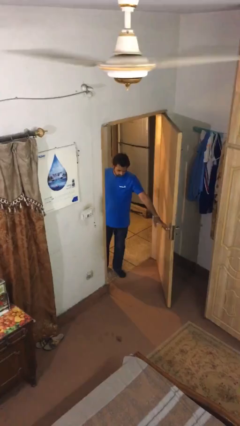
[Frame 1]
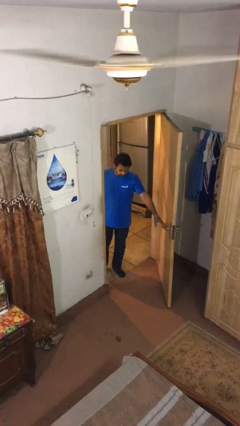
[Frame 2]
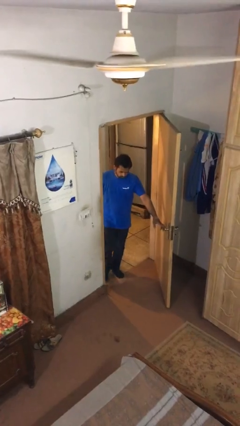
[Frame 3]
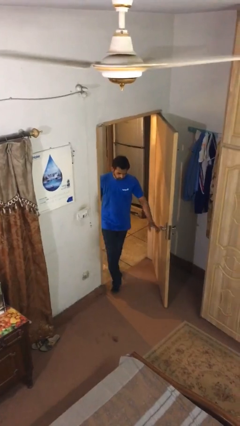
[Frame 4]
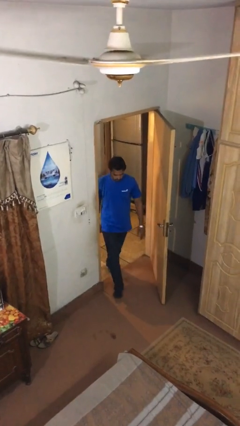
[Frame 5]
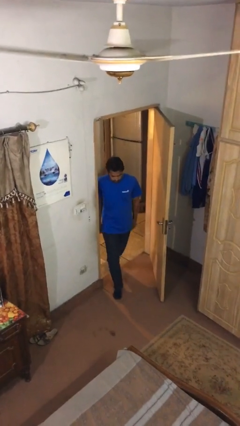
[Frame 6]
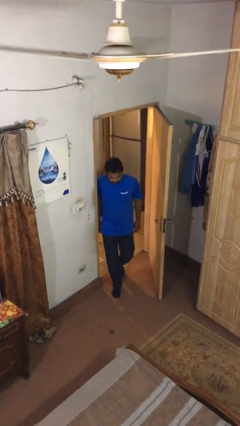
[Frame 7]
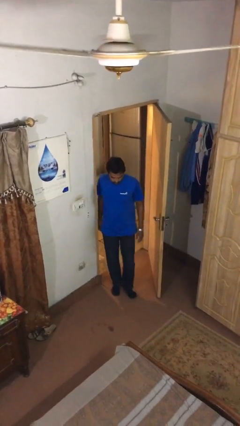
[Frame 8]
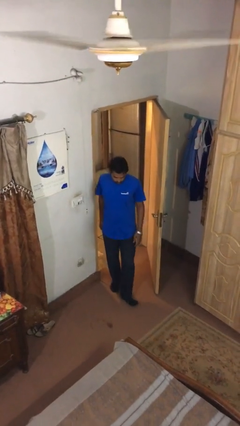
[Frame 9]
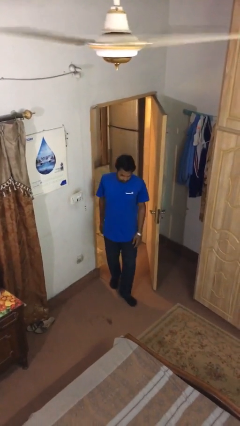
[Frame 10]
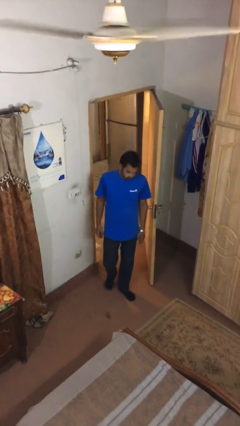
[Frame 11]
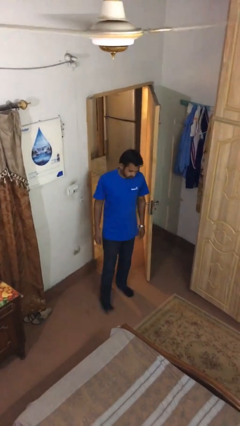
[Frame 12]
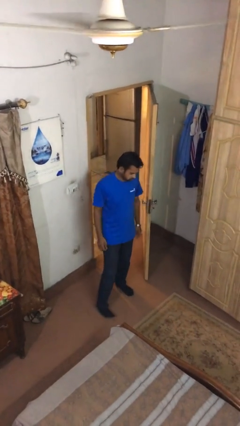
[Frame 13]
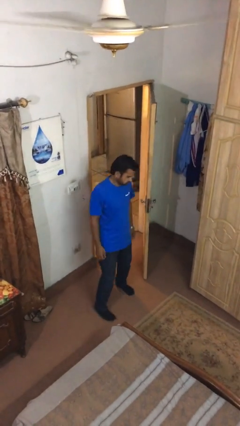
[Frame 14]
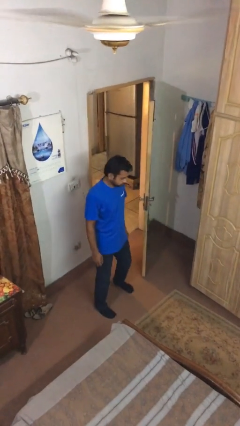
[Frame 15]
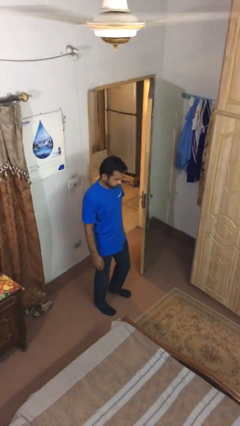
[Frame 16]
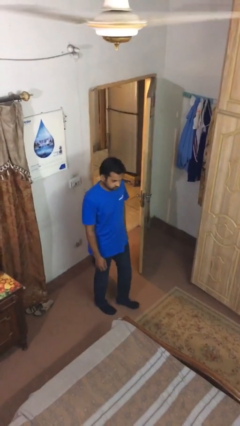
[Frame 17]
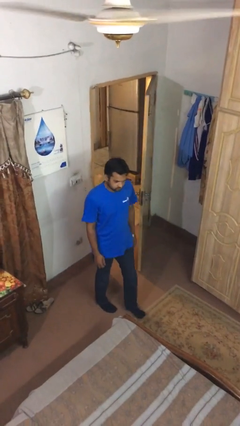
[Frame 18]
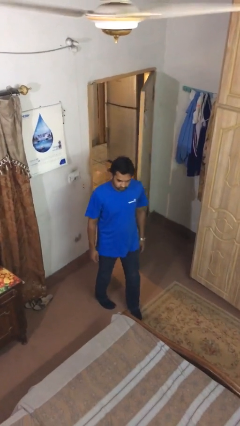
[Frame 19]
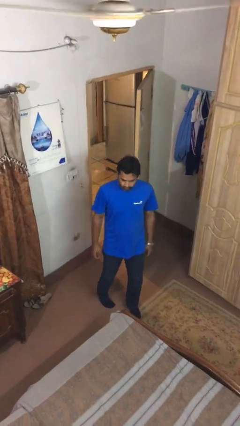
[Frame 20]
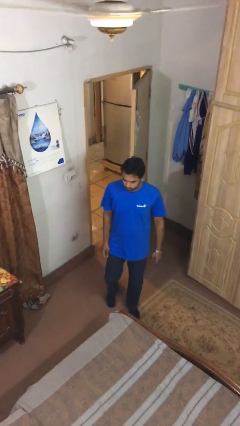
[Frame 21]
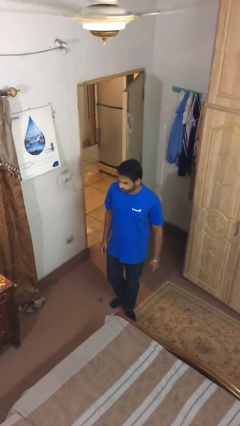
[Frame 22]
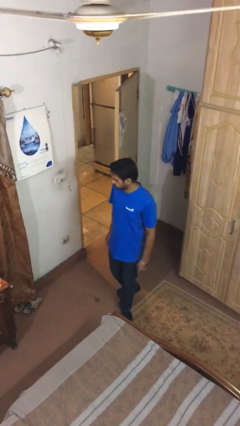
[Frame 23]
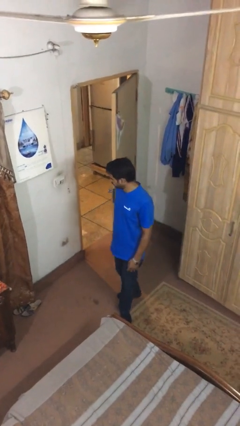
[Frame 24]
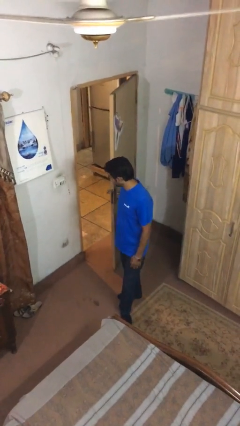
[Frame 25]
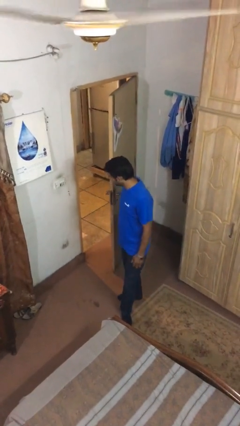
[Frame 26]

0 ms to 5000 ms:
person enters scene through structure

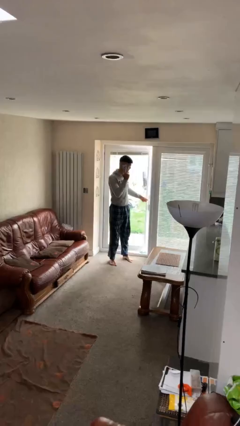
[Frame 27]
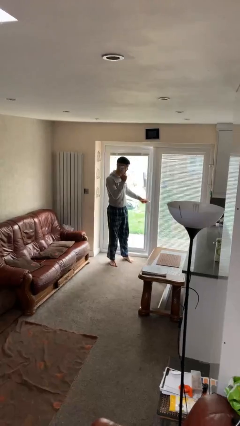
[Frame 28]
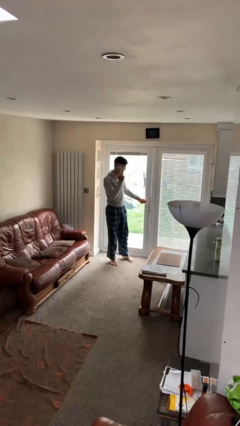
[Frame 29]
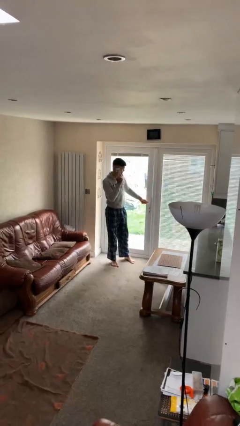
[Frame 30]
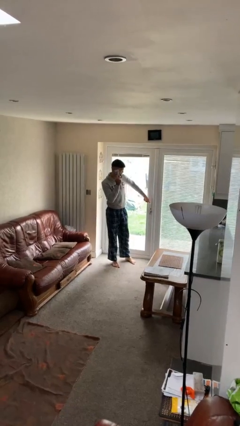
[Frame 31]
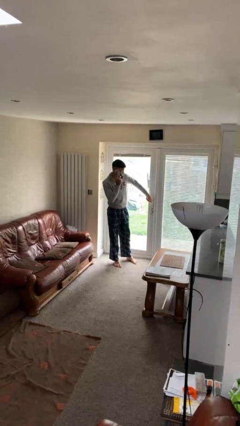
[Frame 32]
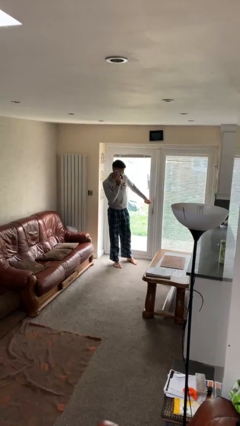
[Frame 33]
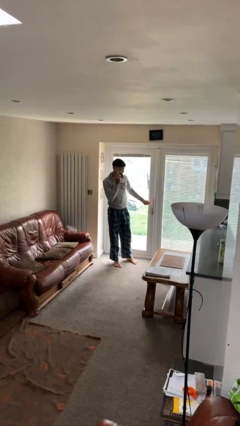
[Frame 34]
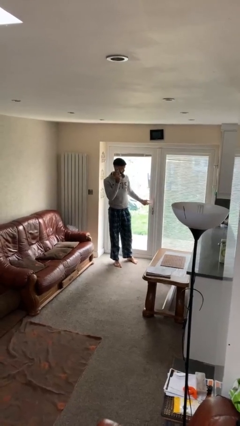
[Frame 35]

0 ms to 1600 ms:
person closes facility door

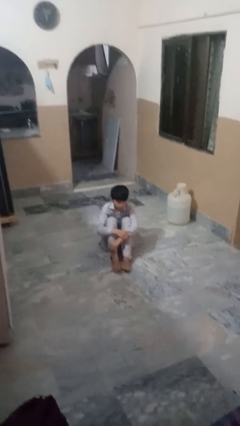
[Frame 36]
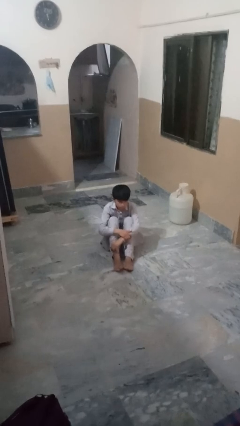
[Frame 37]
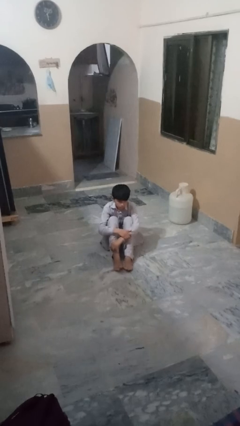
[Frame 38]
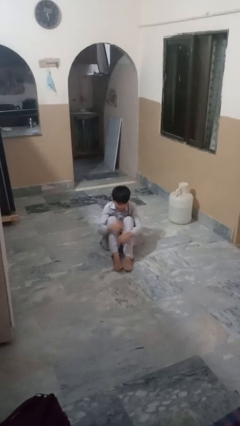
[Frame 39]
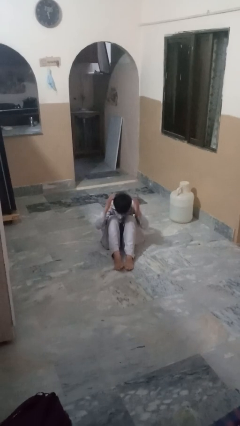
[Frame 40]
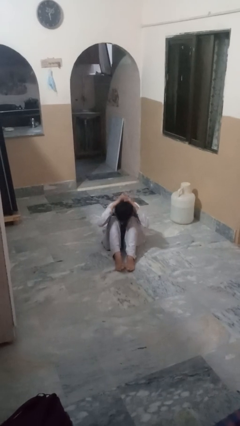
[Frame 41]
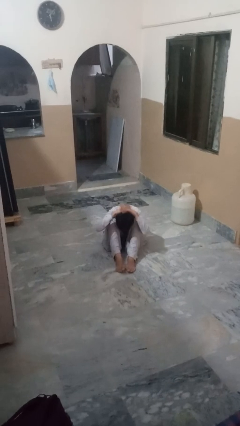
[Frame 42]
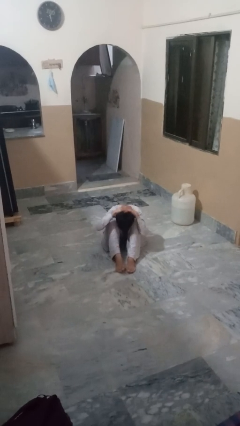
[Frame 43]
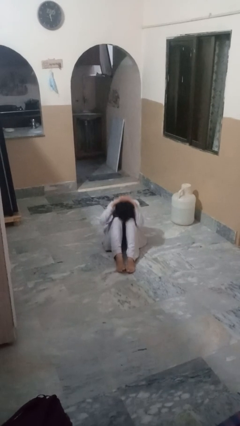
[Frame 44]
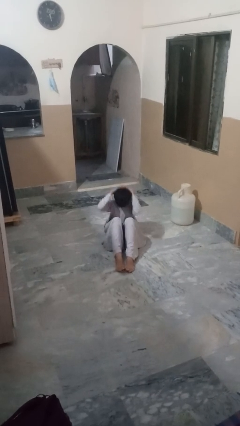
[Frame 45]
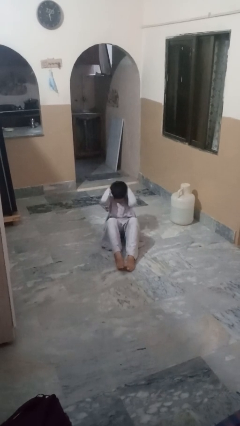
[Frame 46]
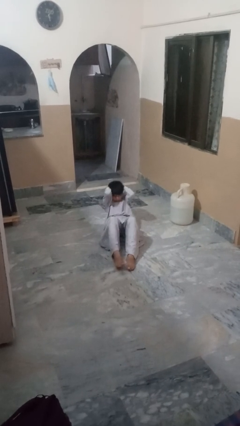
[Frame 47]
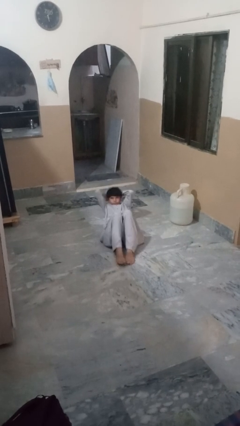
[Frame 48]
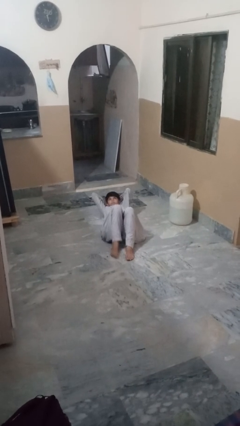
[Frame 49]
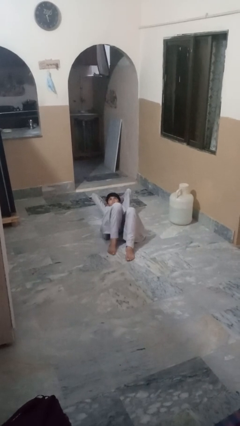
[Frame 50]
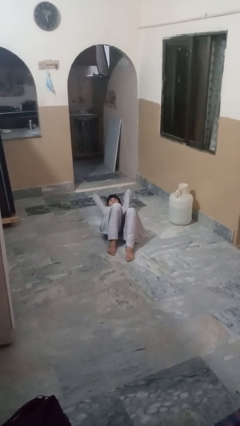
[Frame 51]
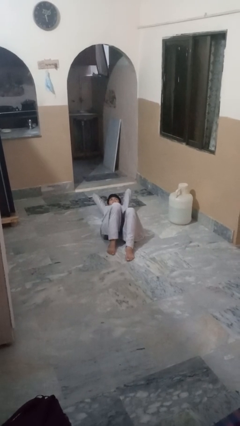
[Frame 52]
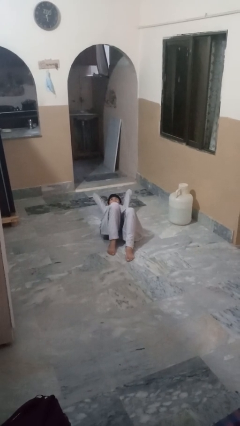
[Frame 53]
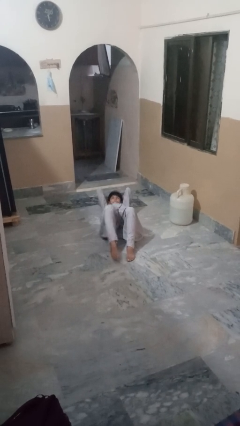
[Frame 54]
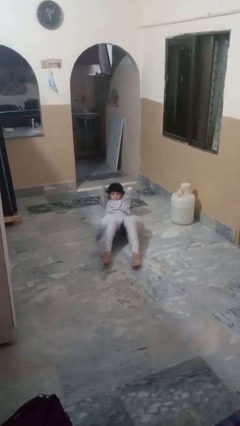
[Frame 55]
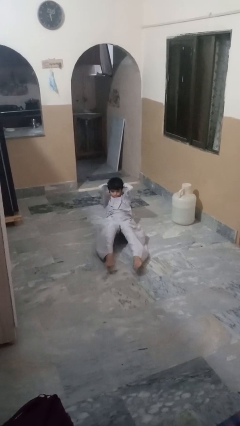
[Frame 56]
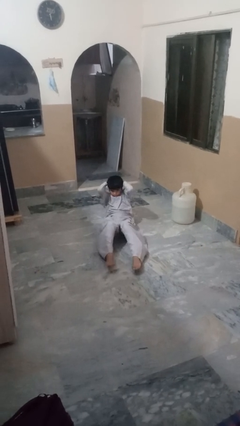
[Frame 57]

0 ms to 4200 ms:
person exercises with situp

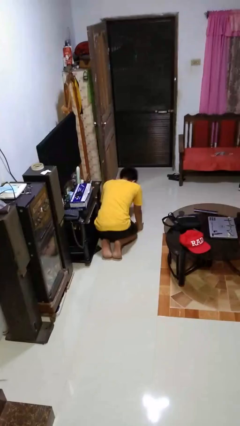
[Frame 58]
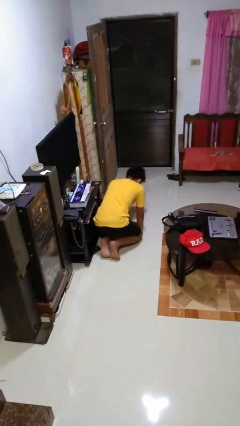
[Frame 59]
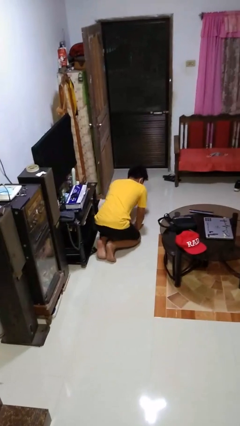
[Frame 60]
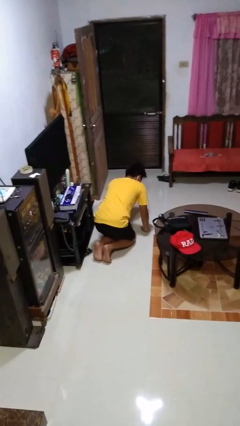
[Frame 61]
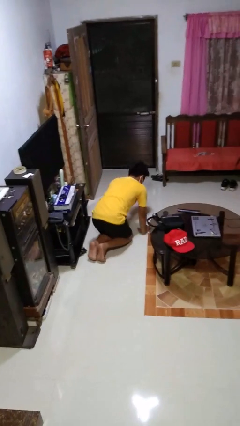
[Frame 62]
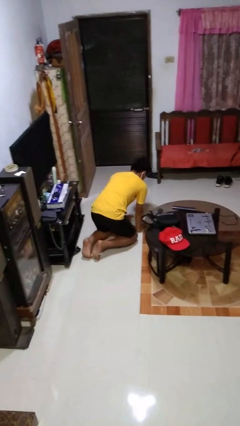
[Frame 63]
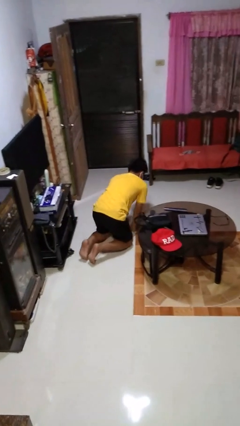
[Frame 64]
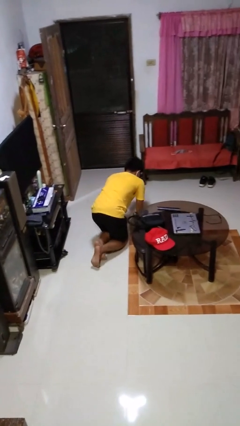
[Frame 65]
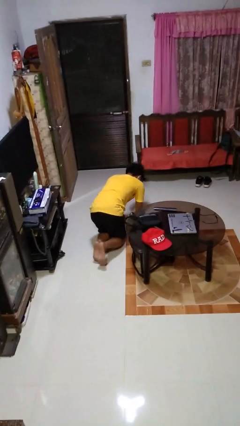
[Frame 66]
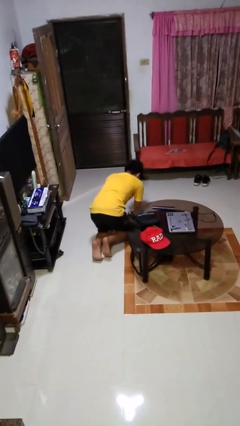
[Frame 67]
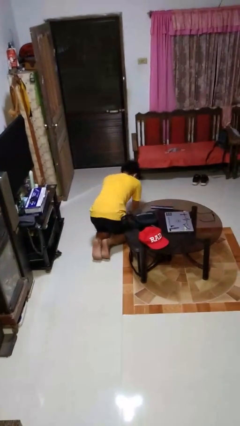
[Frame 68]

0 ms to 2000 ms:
person crawls

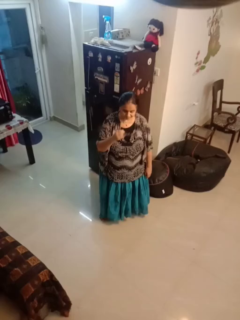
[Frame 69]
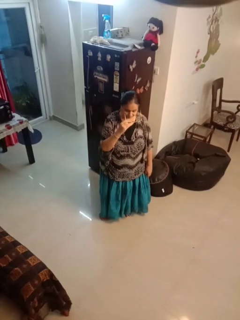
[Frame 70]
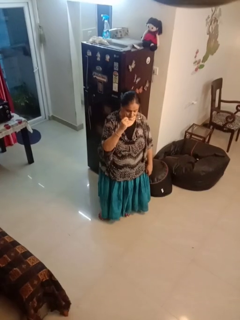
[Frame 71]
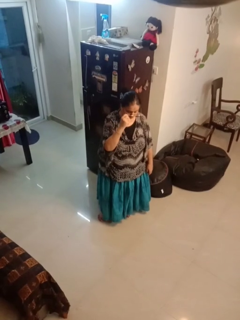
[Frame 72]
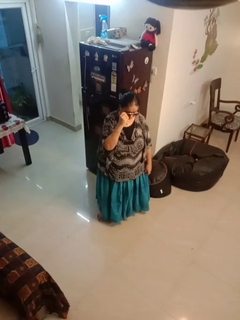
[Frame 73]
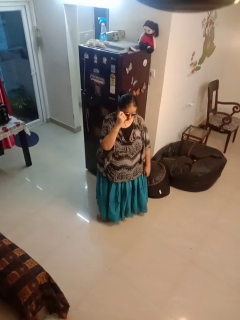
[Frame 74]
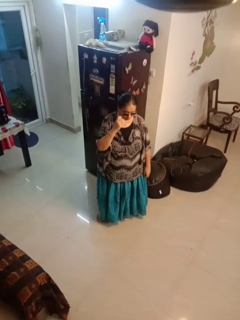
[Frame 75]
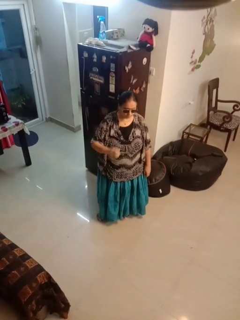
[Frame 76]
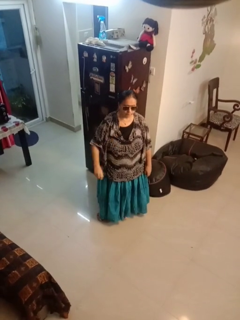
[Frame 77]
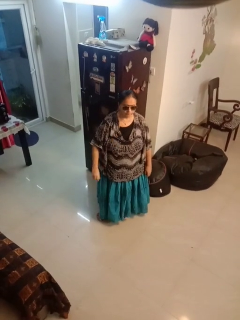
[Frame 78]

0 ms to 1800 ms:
person puts on sunglasses

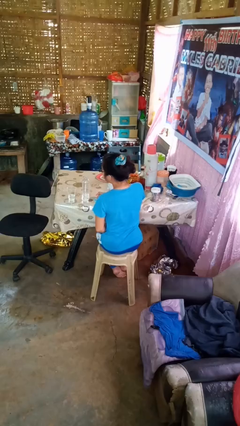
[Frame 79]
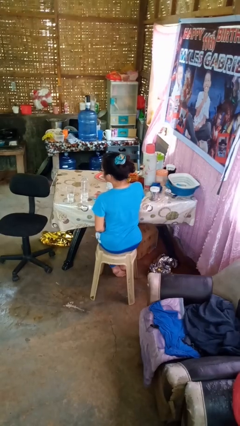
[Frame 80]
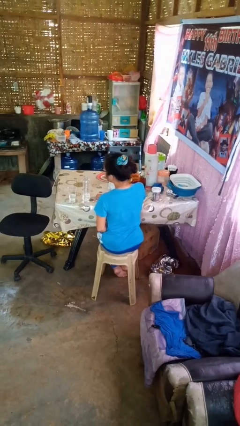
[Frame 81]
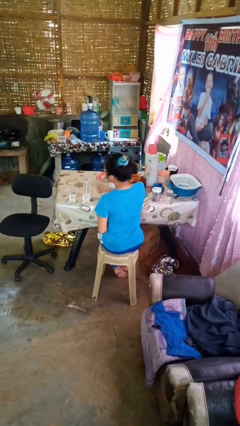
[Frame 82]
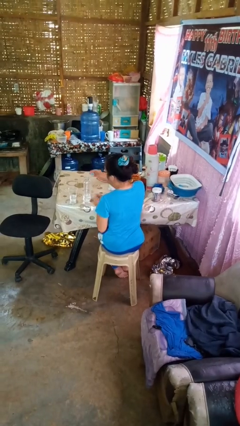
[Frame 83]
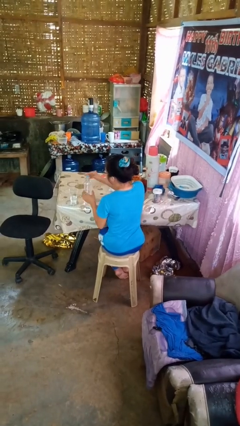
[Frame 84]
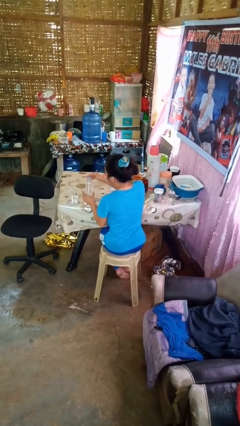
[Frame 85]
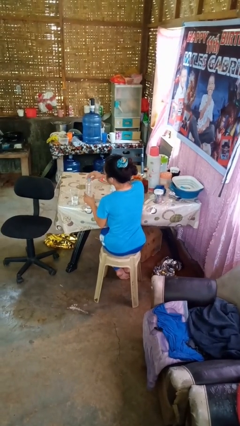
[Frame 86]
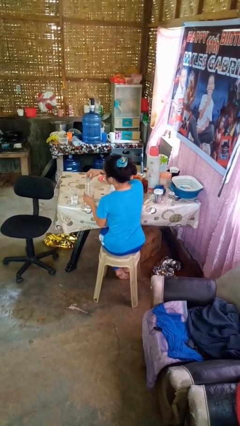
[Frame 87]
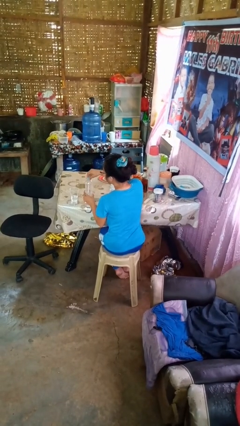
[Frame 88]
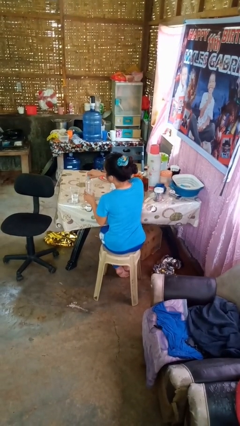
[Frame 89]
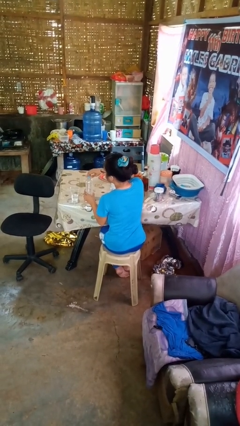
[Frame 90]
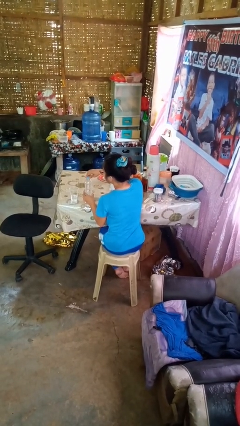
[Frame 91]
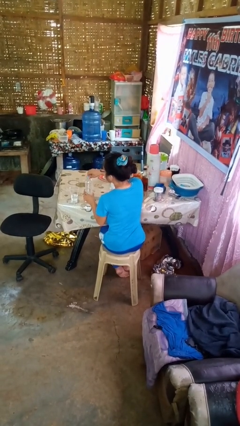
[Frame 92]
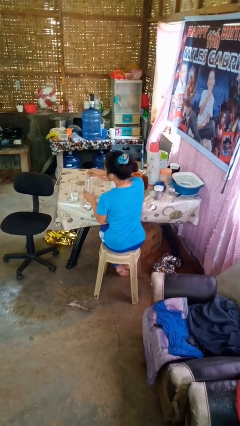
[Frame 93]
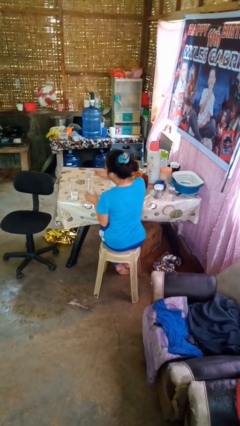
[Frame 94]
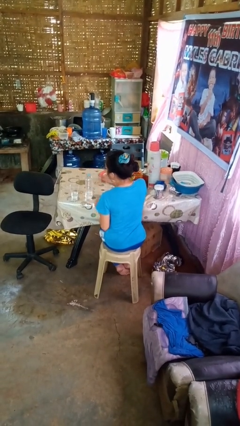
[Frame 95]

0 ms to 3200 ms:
person screws lid to bottle
